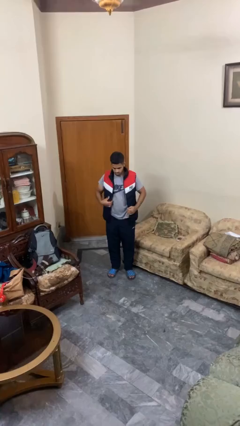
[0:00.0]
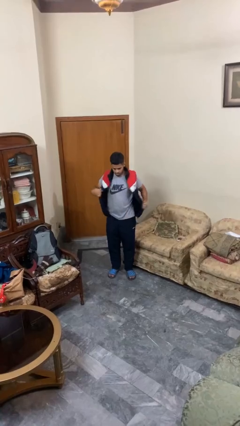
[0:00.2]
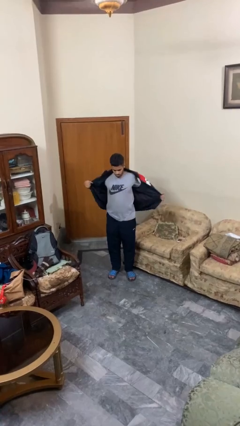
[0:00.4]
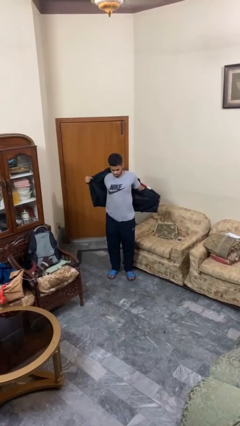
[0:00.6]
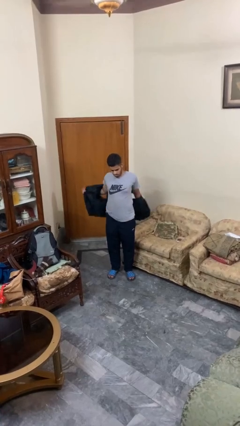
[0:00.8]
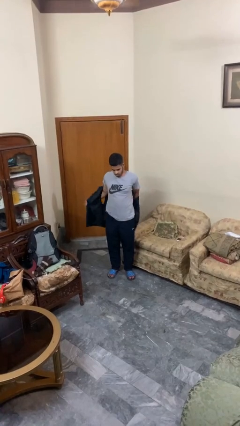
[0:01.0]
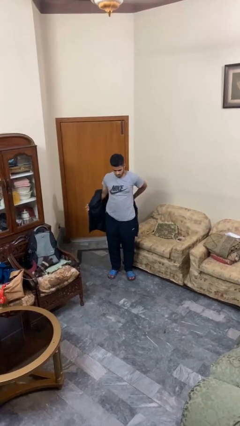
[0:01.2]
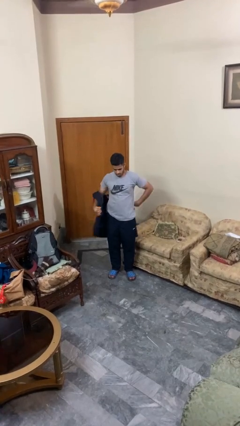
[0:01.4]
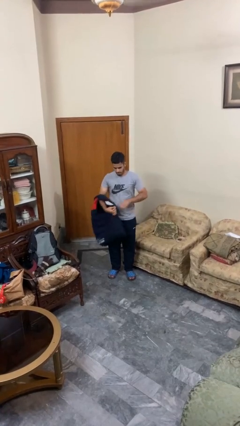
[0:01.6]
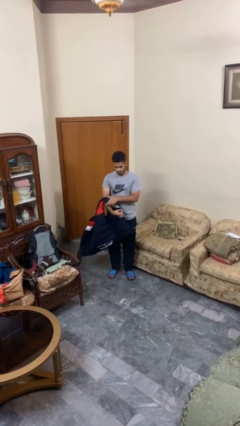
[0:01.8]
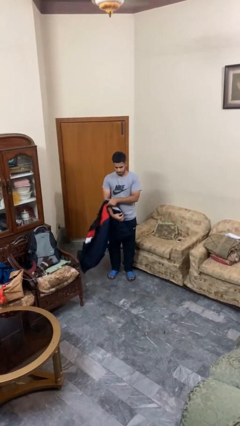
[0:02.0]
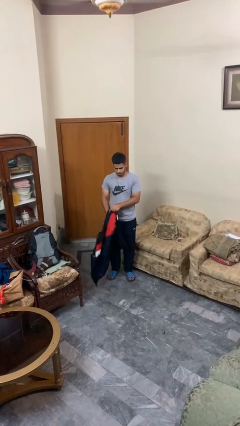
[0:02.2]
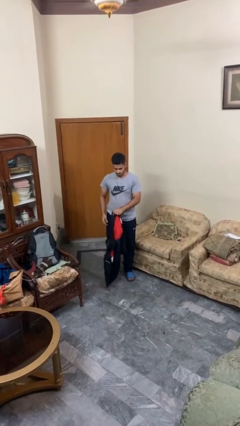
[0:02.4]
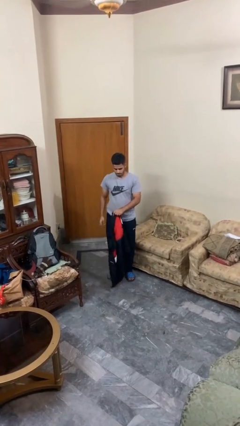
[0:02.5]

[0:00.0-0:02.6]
person takes off jacket

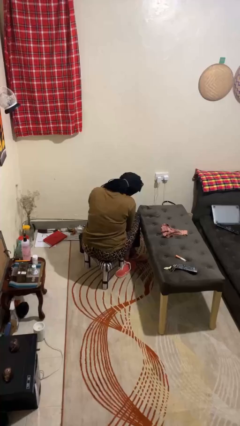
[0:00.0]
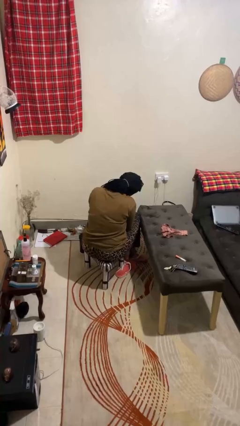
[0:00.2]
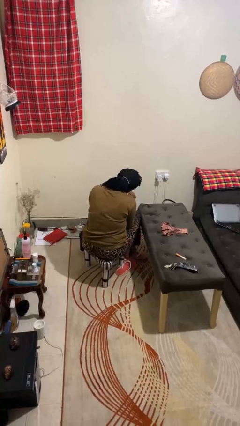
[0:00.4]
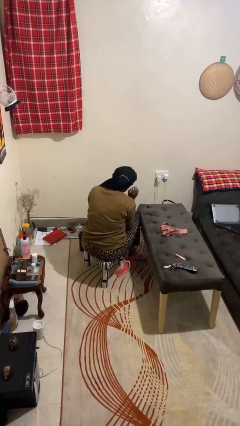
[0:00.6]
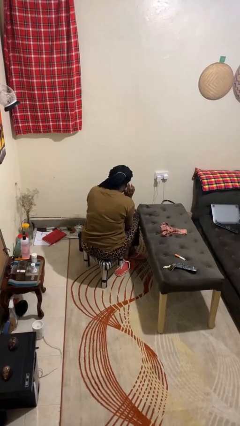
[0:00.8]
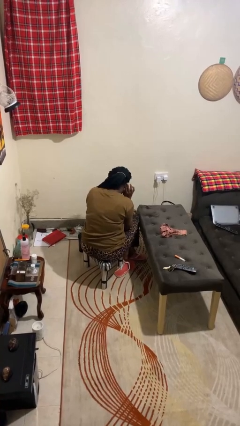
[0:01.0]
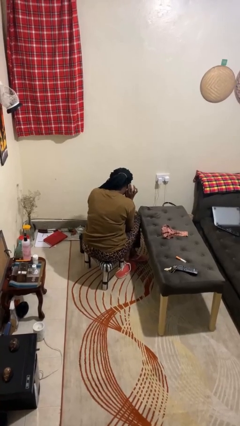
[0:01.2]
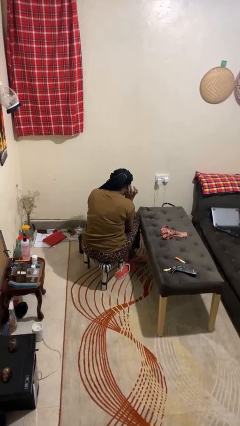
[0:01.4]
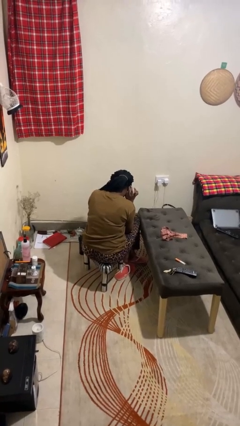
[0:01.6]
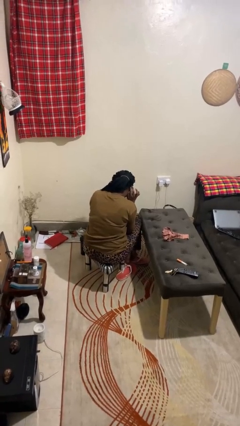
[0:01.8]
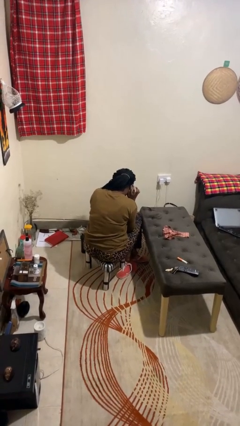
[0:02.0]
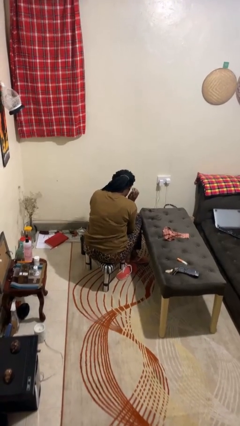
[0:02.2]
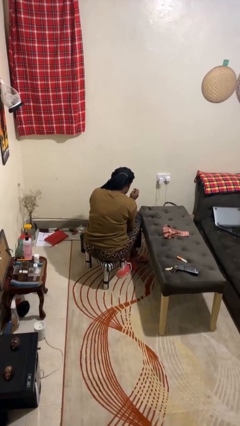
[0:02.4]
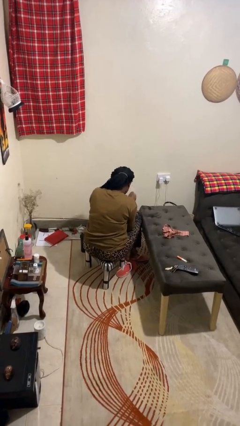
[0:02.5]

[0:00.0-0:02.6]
person gestures listen closely

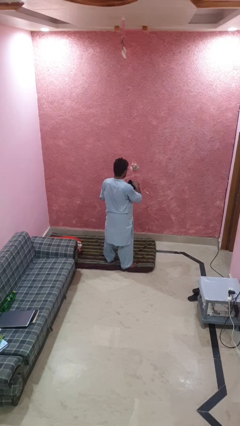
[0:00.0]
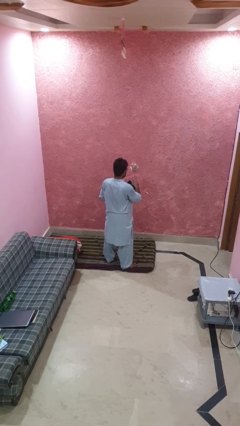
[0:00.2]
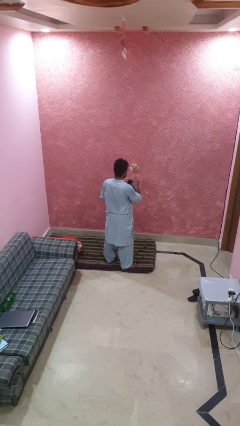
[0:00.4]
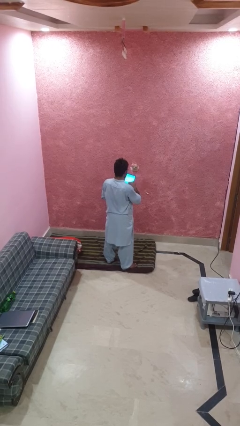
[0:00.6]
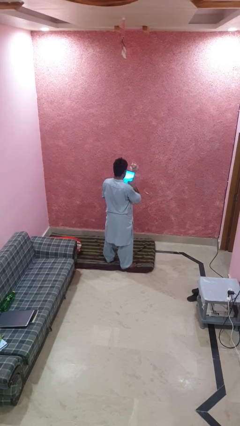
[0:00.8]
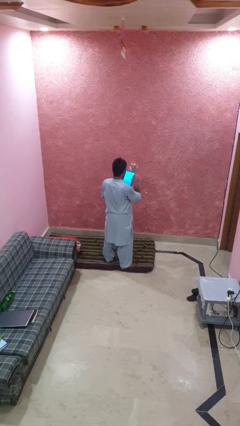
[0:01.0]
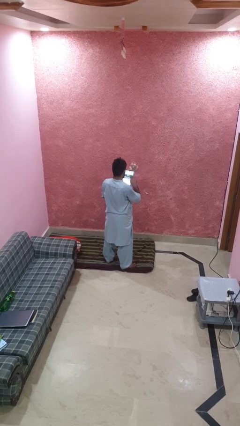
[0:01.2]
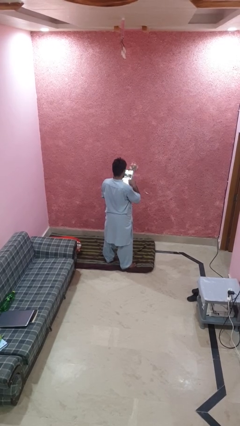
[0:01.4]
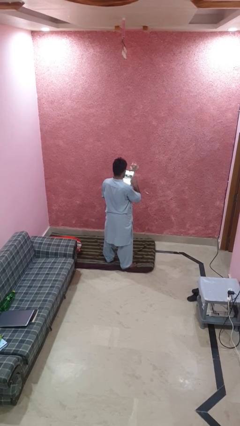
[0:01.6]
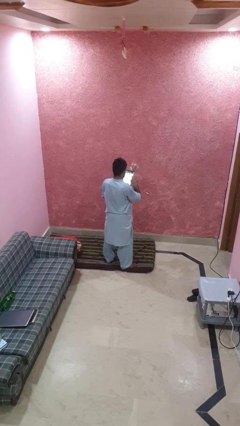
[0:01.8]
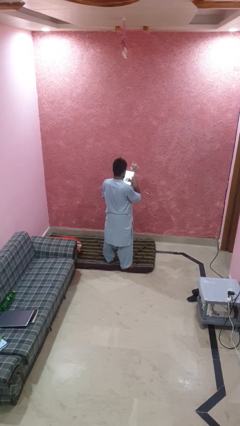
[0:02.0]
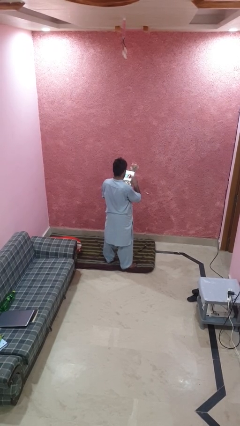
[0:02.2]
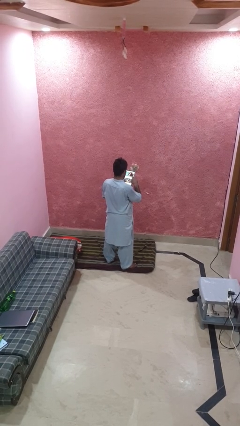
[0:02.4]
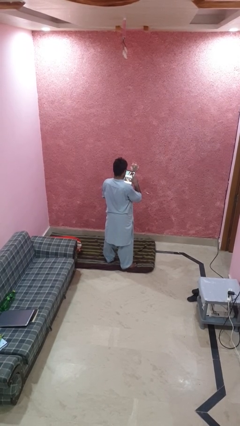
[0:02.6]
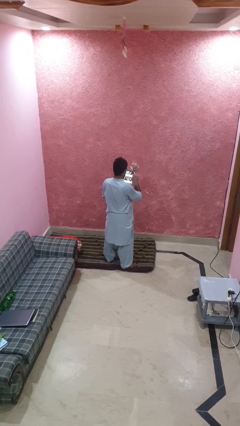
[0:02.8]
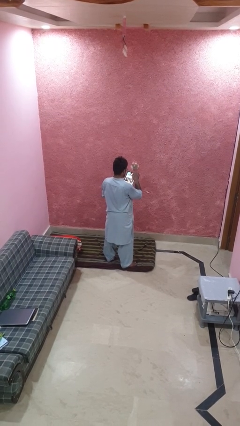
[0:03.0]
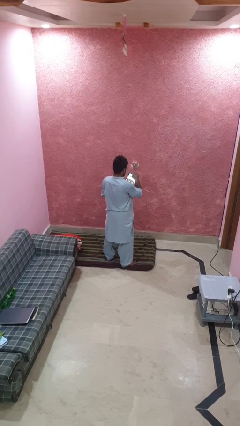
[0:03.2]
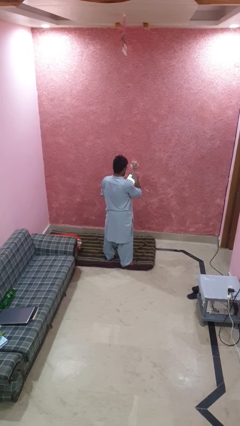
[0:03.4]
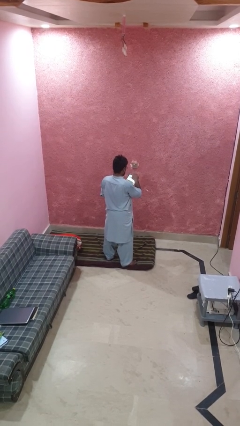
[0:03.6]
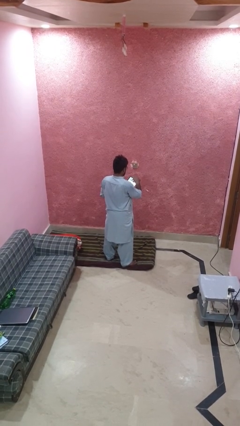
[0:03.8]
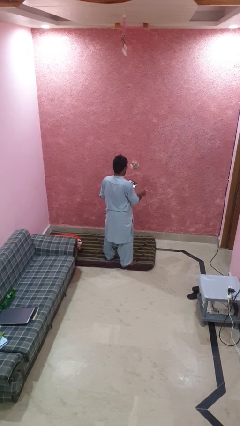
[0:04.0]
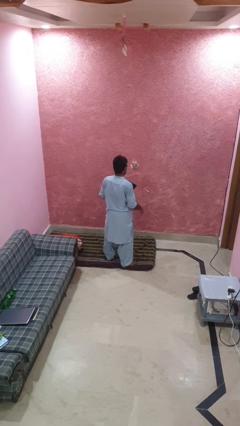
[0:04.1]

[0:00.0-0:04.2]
person interacts with tablet

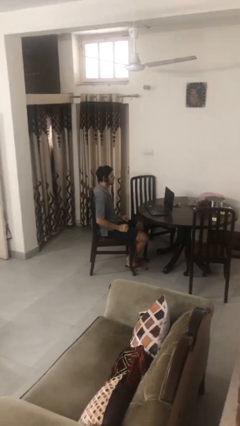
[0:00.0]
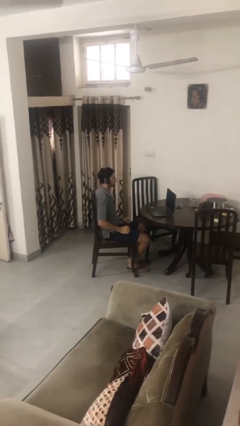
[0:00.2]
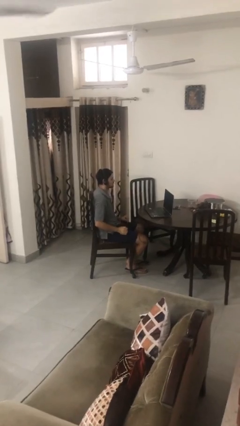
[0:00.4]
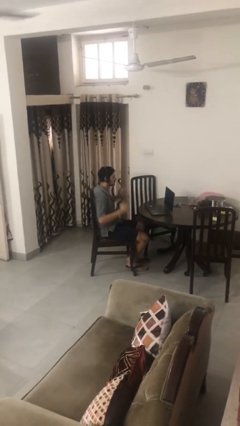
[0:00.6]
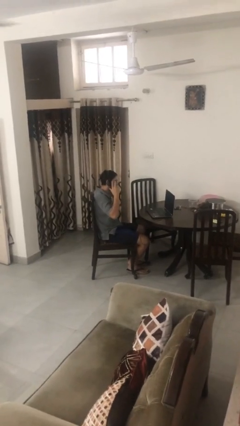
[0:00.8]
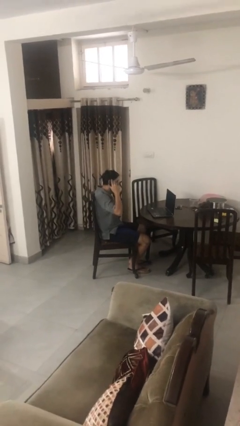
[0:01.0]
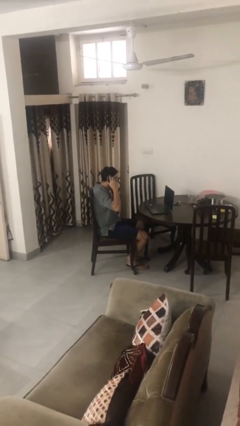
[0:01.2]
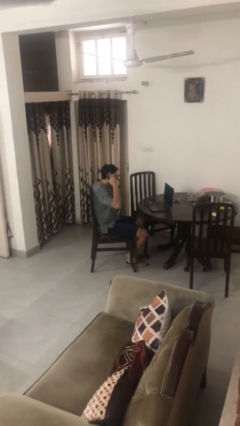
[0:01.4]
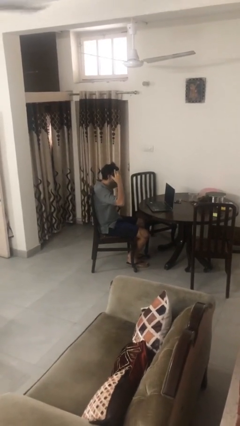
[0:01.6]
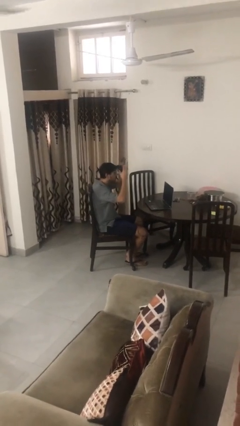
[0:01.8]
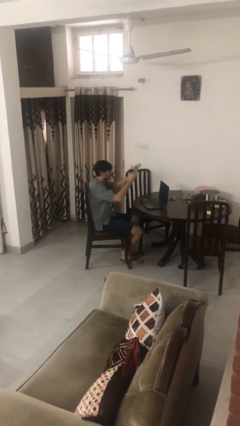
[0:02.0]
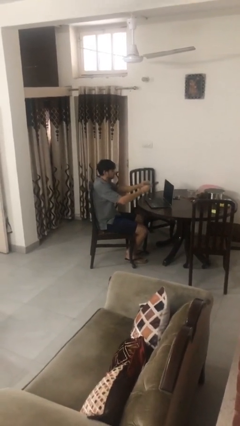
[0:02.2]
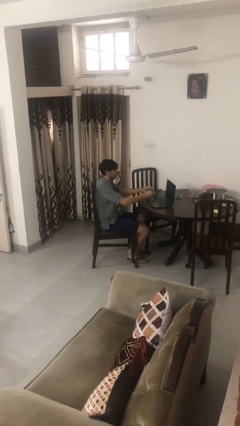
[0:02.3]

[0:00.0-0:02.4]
person takes off headphones

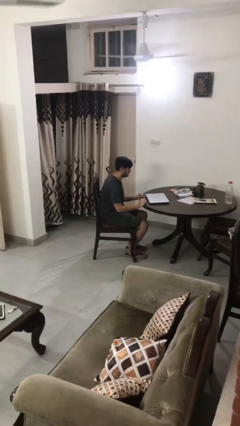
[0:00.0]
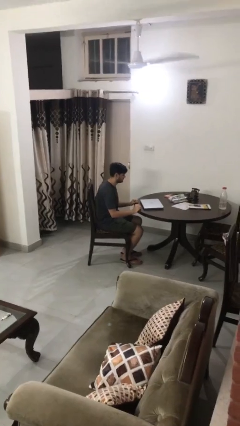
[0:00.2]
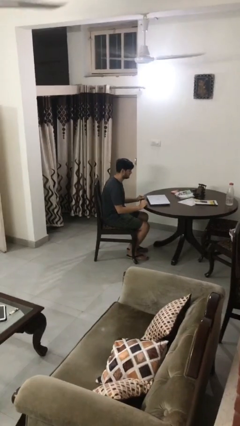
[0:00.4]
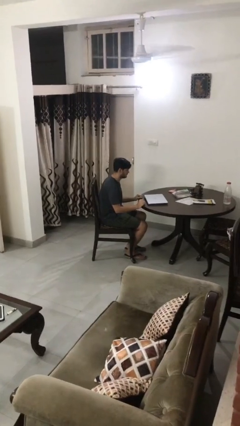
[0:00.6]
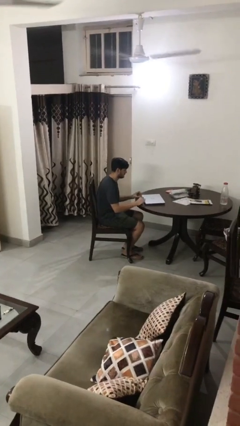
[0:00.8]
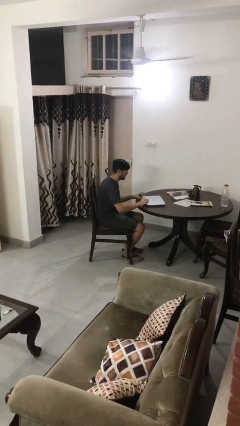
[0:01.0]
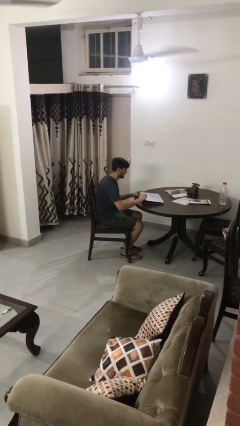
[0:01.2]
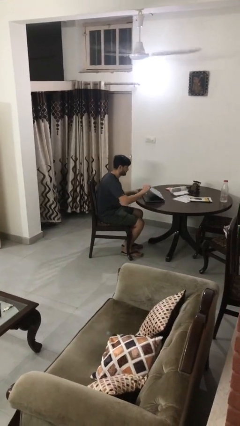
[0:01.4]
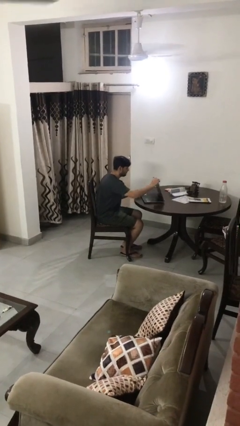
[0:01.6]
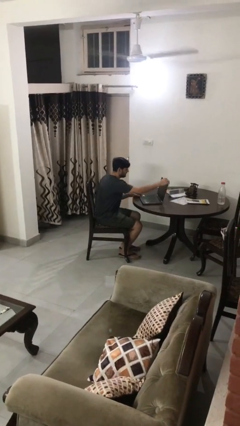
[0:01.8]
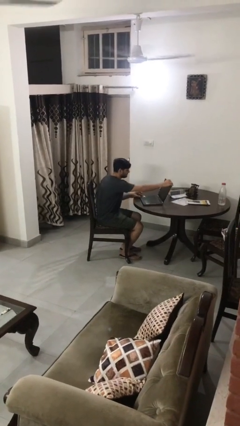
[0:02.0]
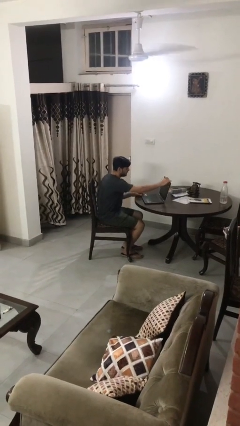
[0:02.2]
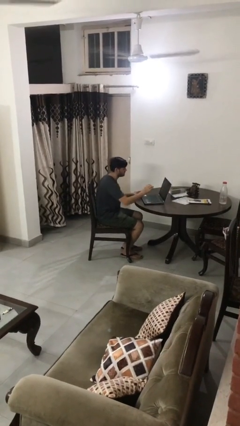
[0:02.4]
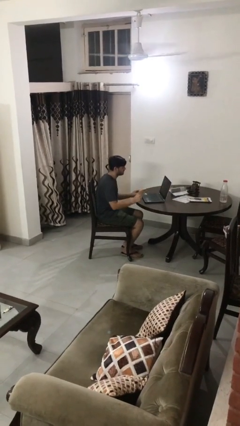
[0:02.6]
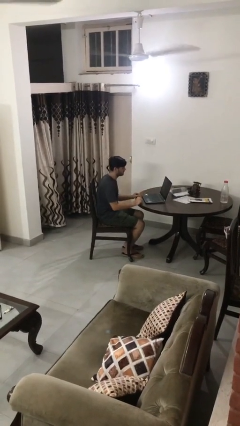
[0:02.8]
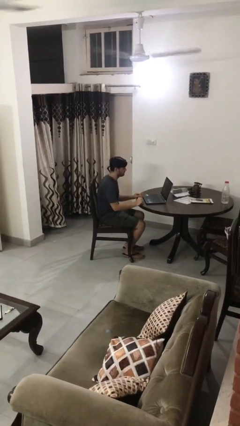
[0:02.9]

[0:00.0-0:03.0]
person opens laptop

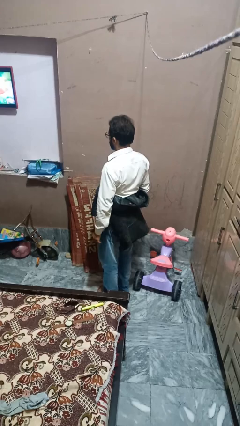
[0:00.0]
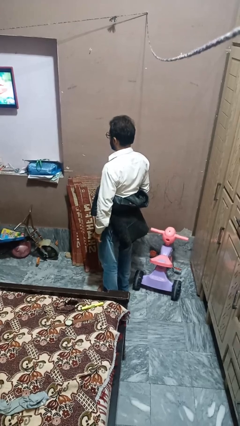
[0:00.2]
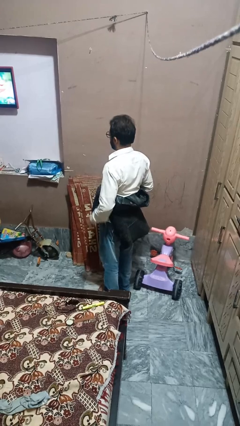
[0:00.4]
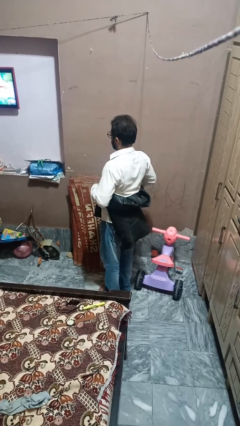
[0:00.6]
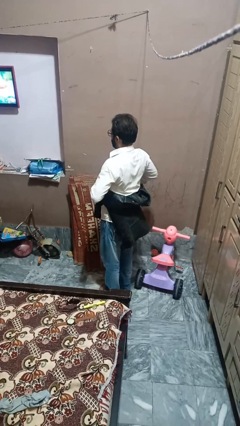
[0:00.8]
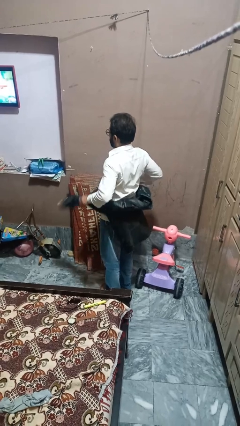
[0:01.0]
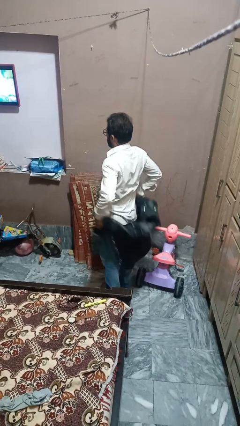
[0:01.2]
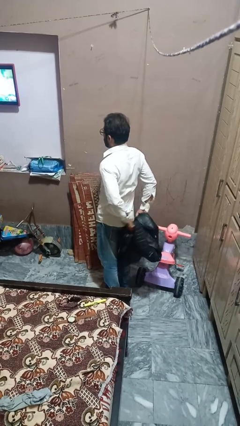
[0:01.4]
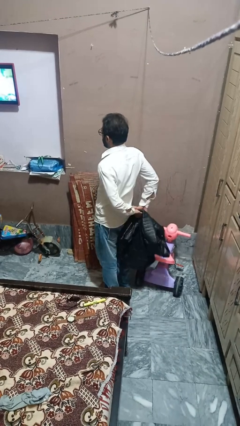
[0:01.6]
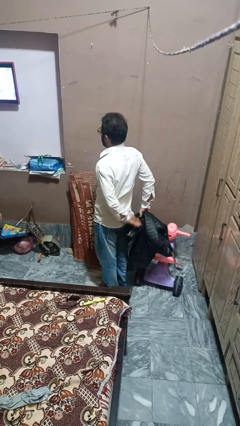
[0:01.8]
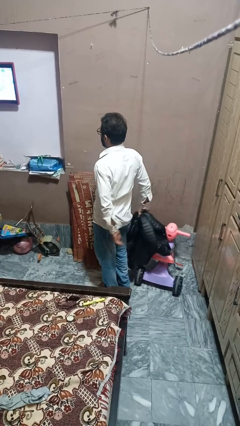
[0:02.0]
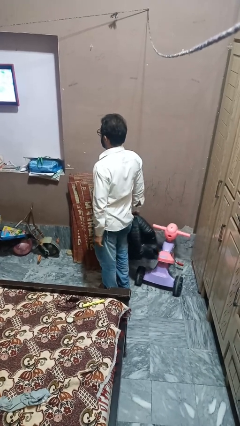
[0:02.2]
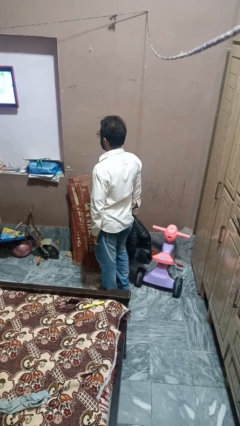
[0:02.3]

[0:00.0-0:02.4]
person unties jacket around waist

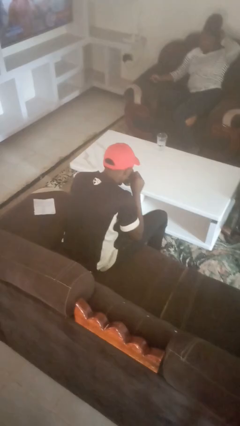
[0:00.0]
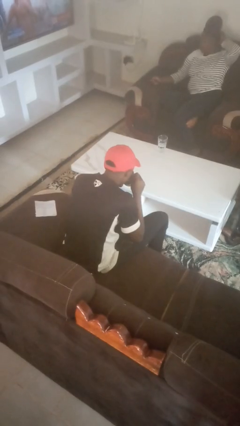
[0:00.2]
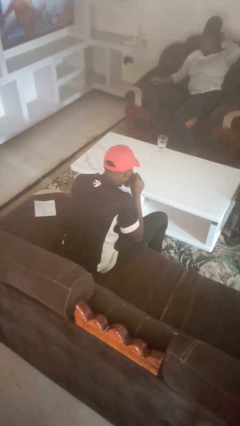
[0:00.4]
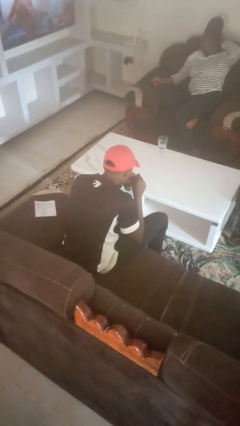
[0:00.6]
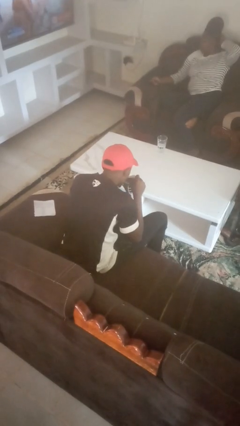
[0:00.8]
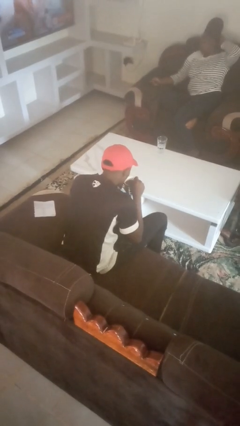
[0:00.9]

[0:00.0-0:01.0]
person drinks from mug
